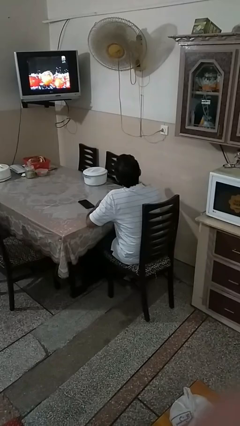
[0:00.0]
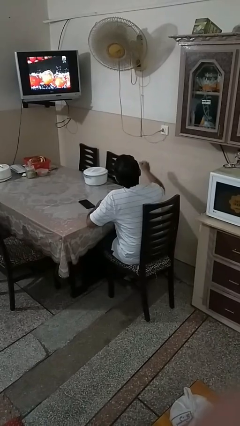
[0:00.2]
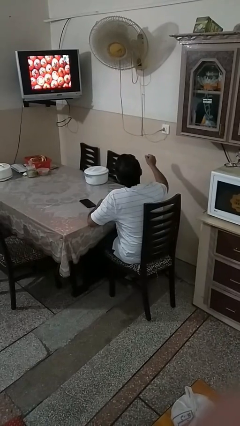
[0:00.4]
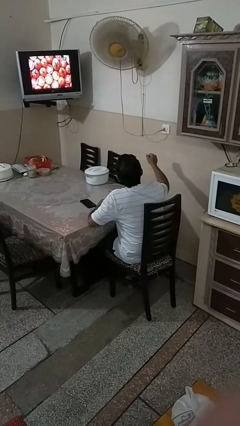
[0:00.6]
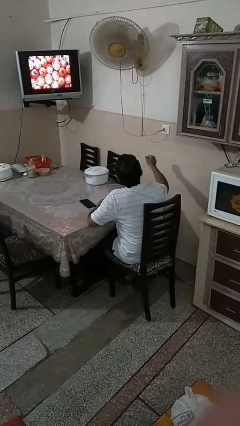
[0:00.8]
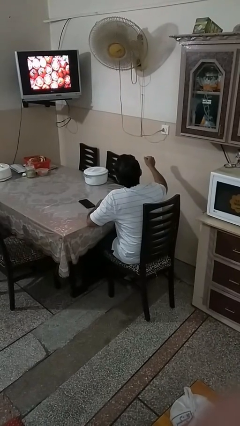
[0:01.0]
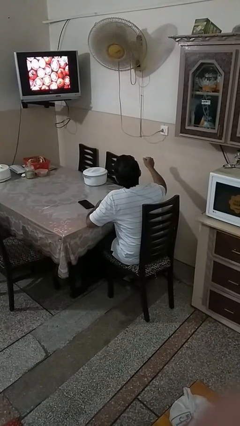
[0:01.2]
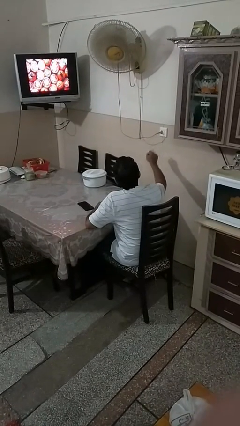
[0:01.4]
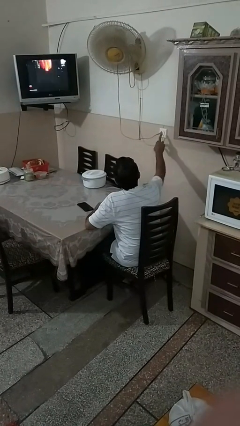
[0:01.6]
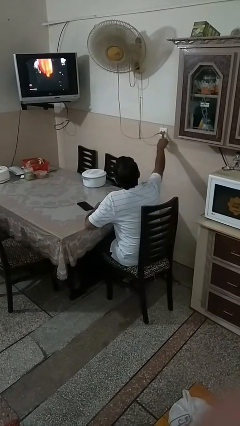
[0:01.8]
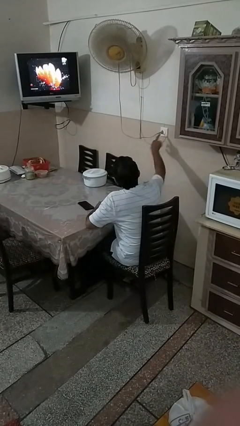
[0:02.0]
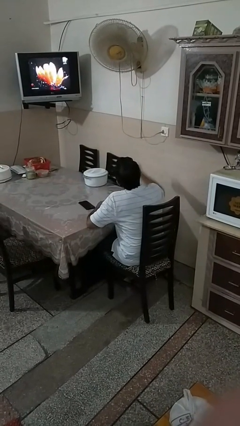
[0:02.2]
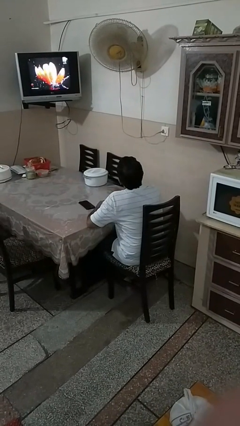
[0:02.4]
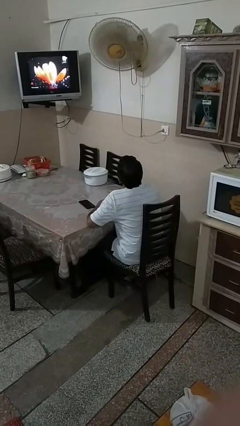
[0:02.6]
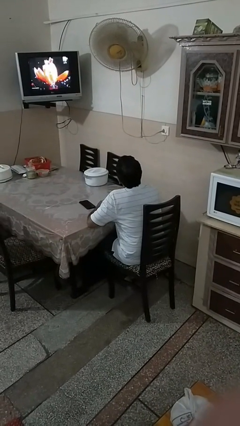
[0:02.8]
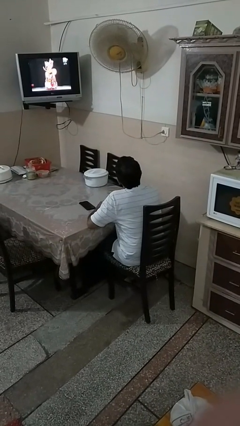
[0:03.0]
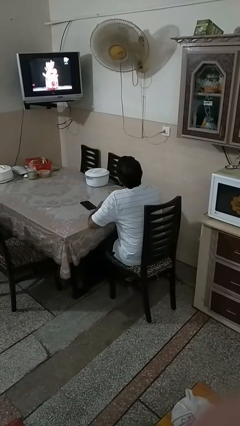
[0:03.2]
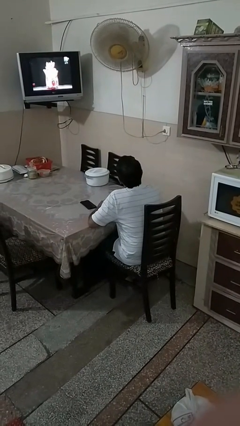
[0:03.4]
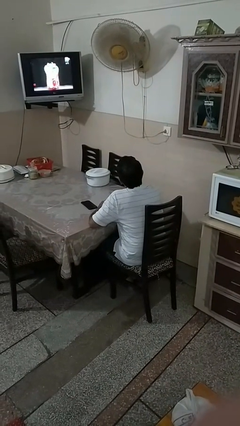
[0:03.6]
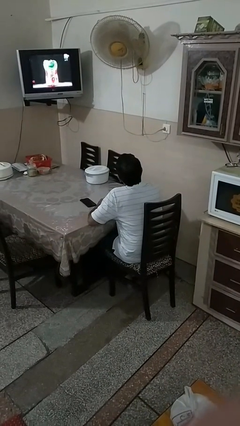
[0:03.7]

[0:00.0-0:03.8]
person turns off fan

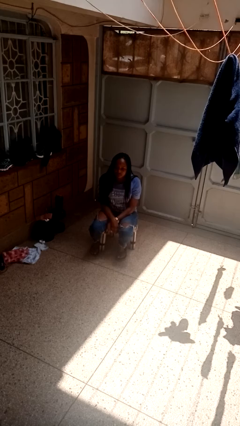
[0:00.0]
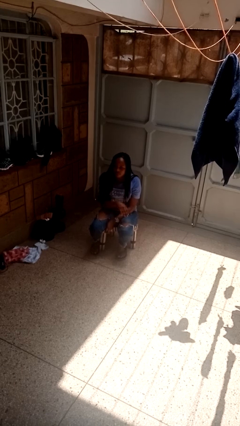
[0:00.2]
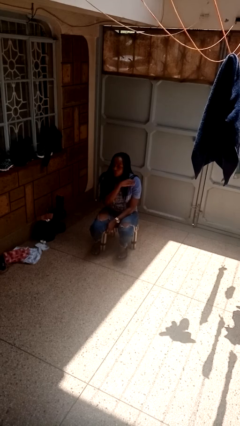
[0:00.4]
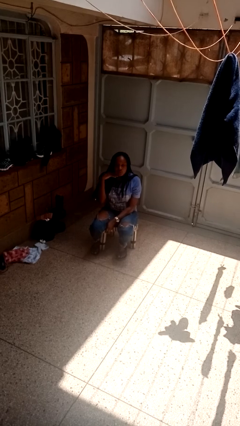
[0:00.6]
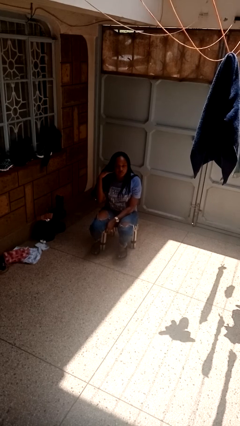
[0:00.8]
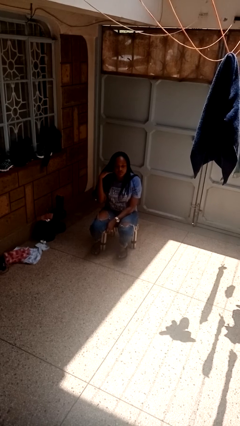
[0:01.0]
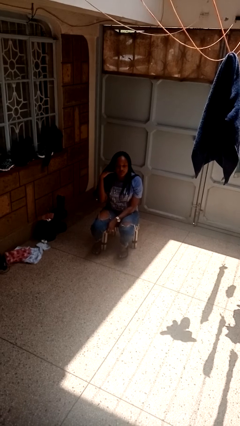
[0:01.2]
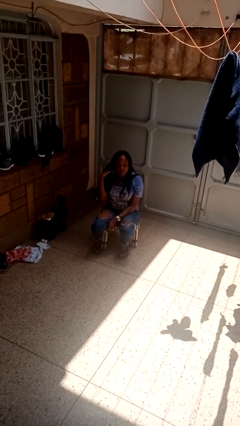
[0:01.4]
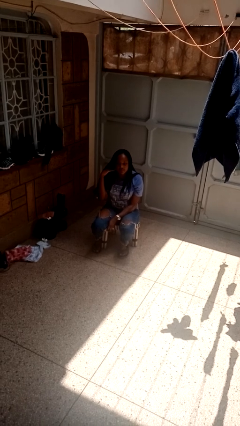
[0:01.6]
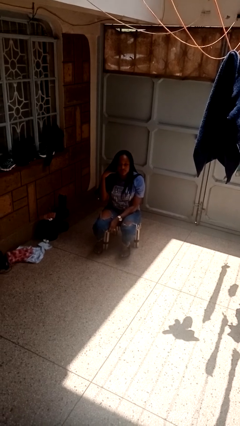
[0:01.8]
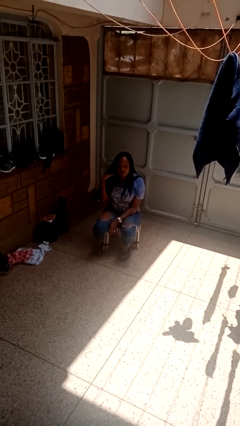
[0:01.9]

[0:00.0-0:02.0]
person gestures cut

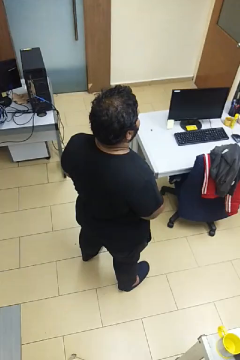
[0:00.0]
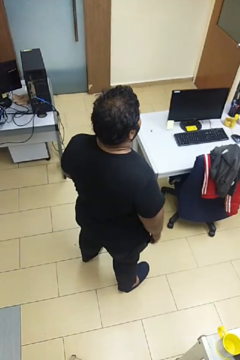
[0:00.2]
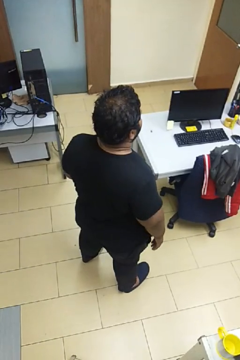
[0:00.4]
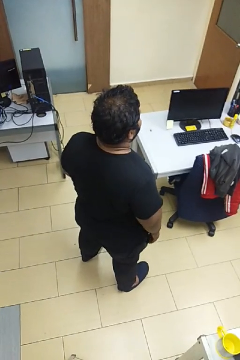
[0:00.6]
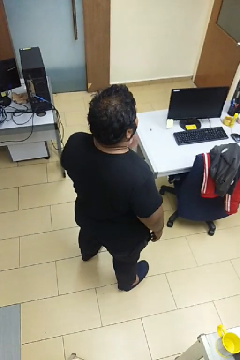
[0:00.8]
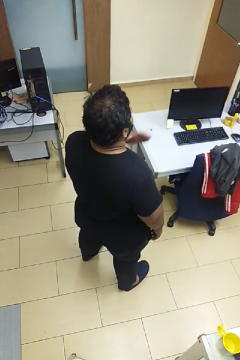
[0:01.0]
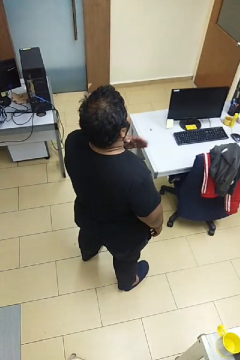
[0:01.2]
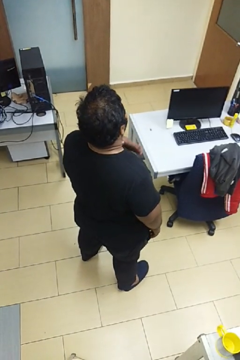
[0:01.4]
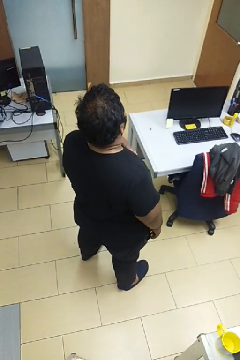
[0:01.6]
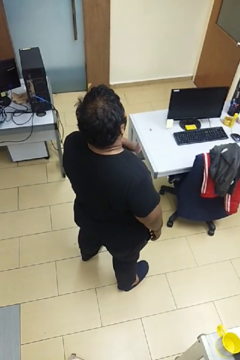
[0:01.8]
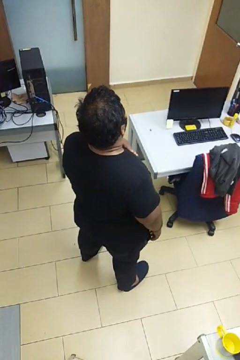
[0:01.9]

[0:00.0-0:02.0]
person drums on chest

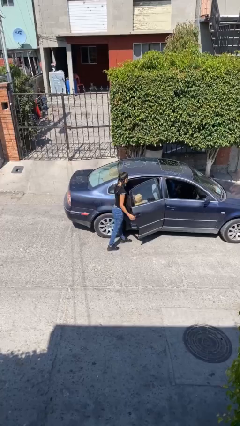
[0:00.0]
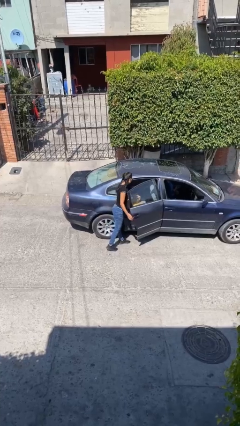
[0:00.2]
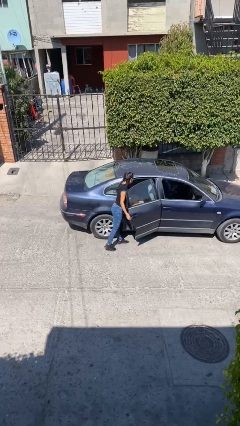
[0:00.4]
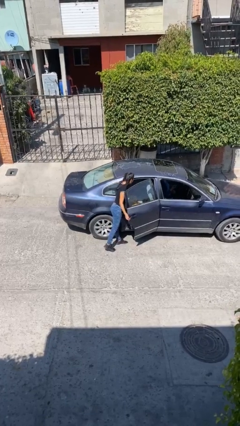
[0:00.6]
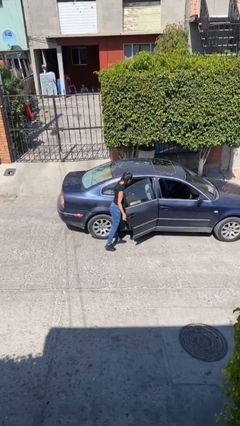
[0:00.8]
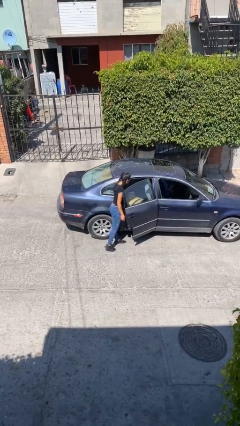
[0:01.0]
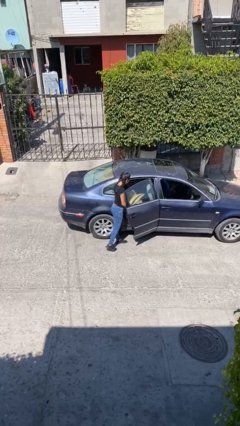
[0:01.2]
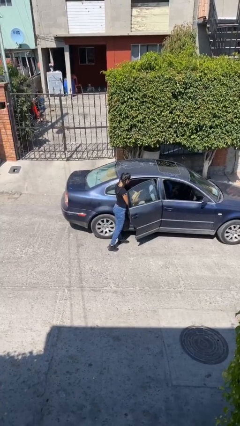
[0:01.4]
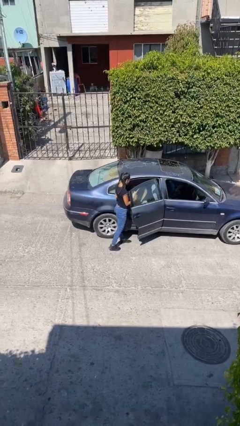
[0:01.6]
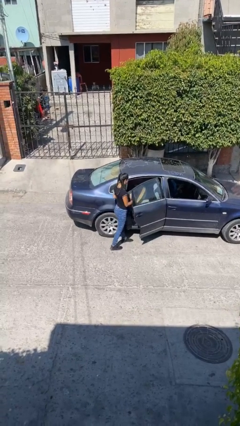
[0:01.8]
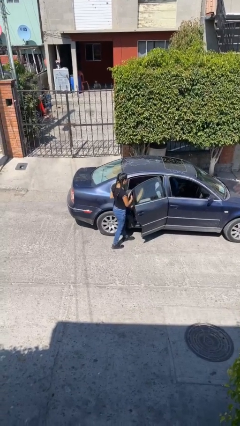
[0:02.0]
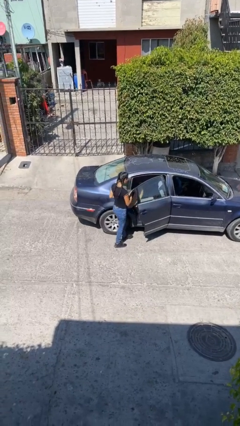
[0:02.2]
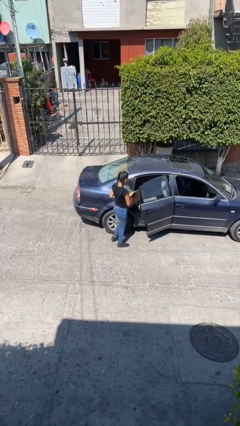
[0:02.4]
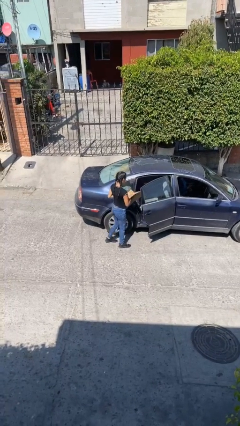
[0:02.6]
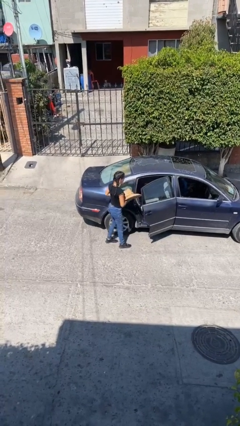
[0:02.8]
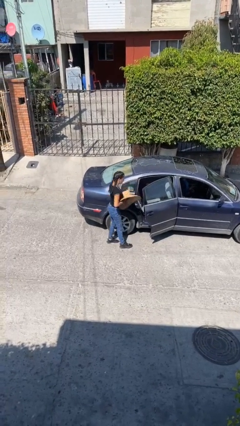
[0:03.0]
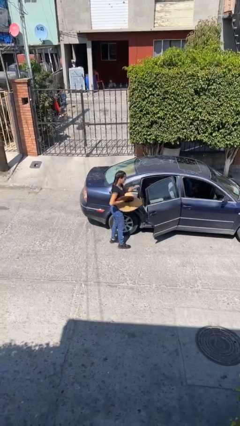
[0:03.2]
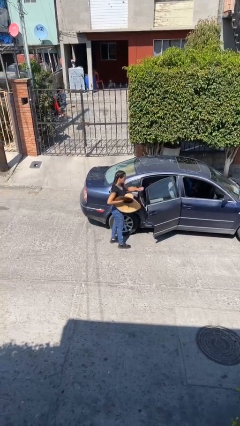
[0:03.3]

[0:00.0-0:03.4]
person unloads car

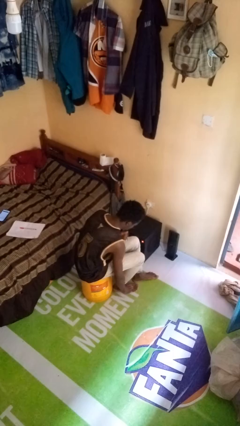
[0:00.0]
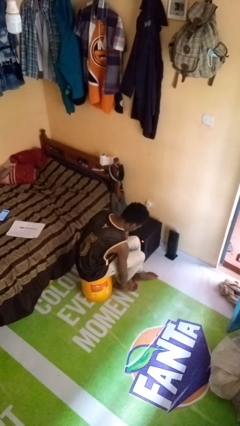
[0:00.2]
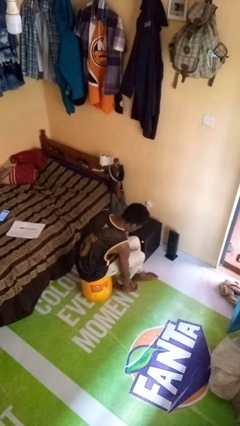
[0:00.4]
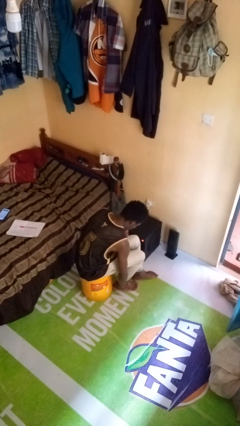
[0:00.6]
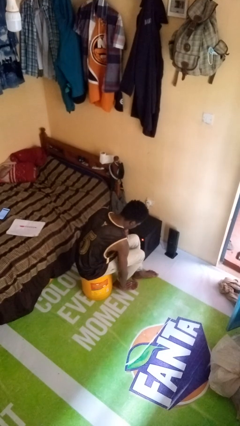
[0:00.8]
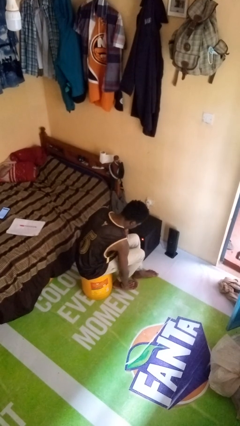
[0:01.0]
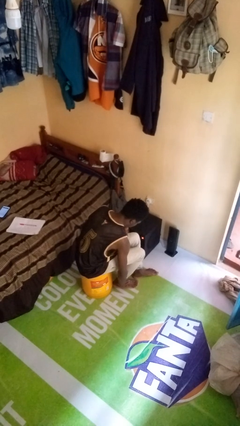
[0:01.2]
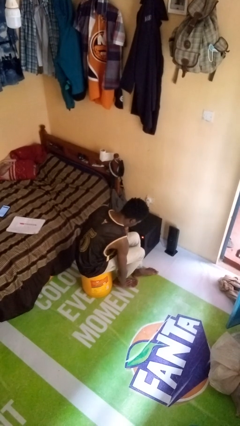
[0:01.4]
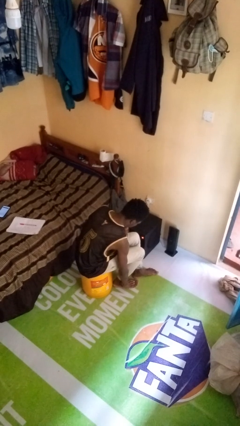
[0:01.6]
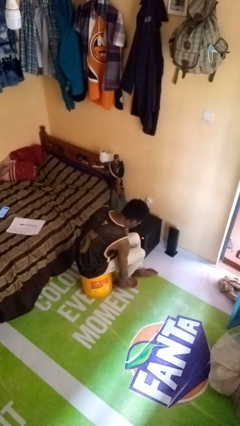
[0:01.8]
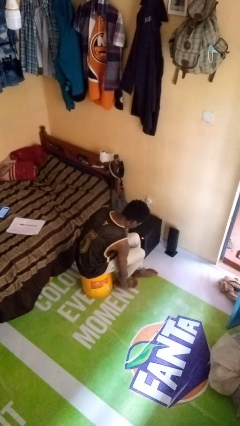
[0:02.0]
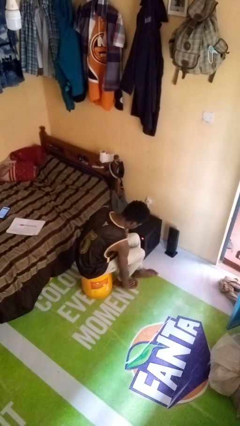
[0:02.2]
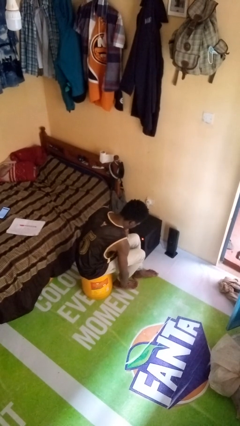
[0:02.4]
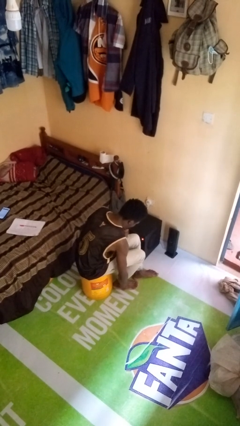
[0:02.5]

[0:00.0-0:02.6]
person rubs foot

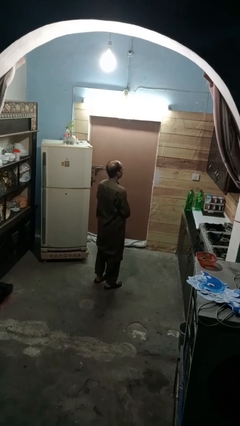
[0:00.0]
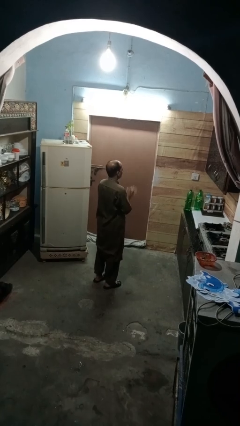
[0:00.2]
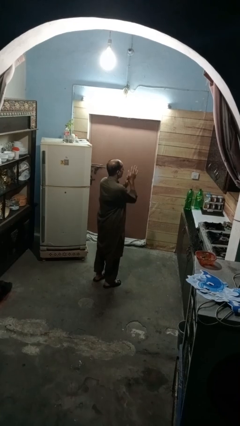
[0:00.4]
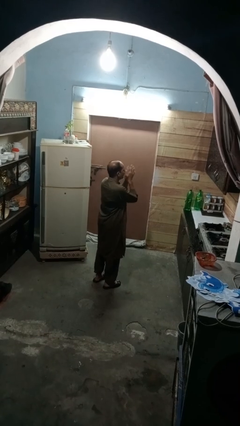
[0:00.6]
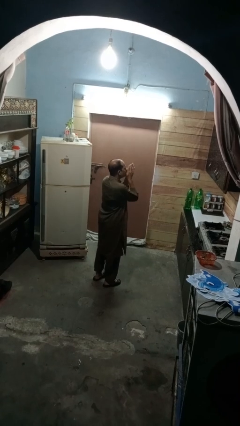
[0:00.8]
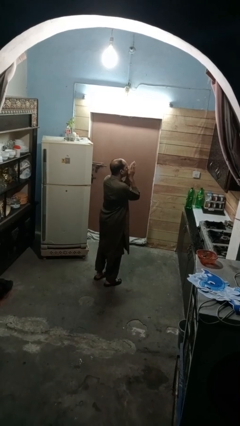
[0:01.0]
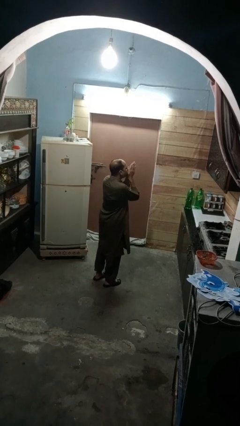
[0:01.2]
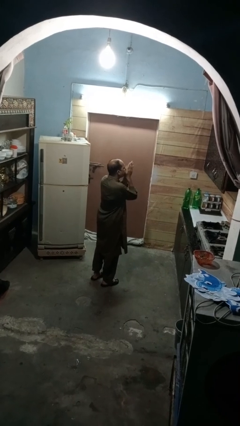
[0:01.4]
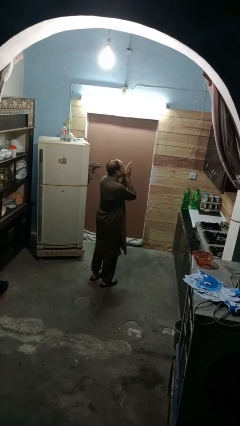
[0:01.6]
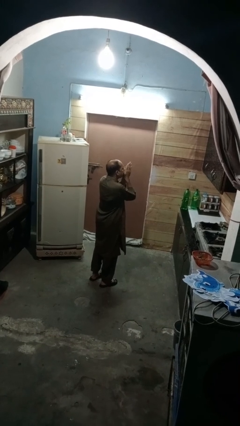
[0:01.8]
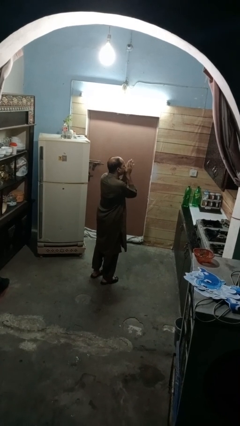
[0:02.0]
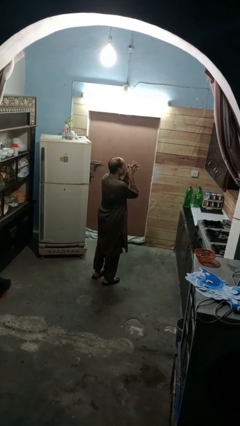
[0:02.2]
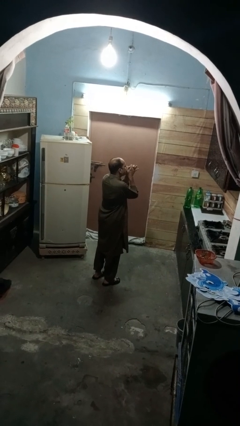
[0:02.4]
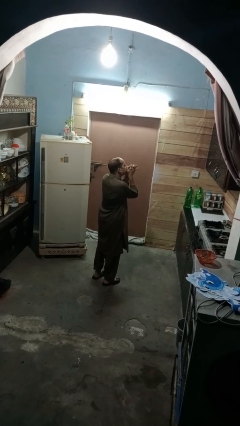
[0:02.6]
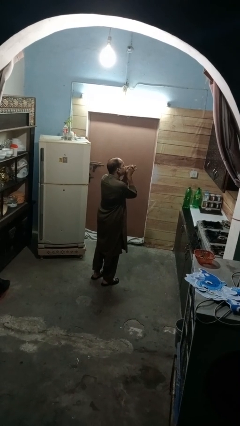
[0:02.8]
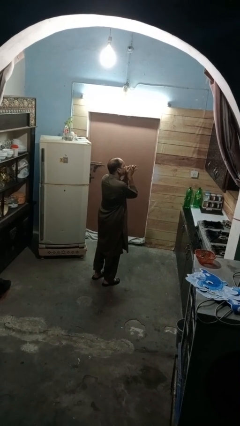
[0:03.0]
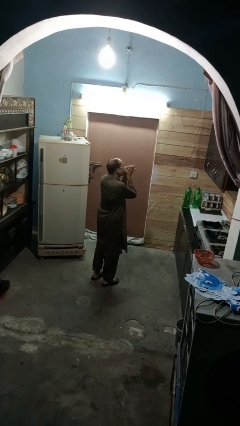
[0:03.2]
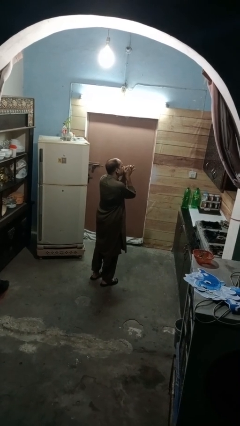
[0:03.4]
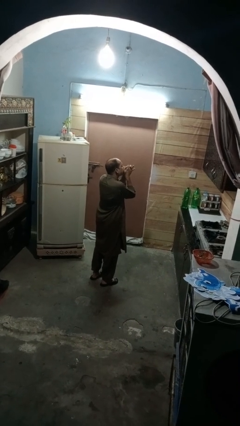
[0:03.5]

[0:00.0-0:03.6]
person blows into hands

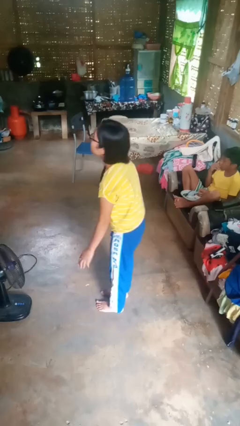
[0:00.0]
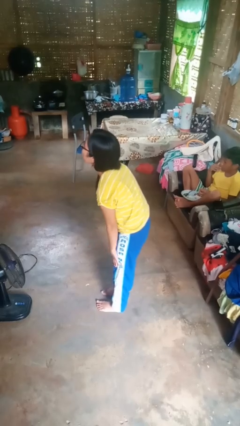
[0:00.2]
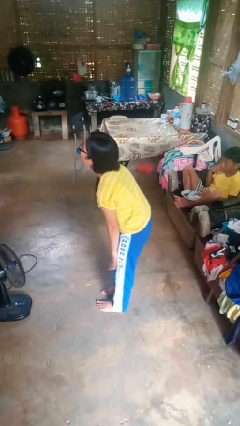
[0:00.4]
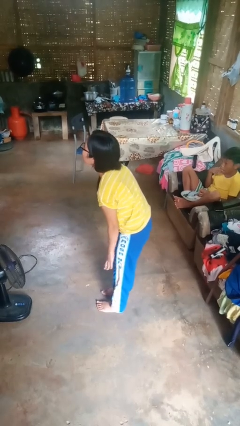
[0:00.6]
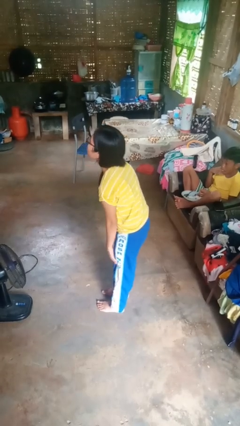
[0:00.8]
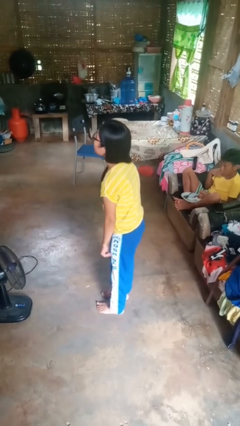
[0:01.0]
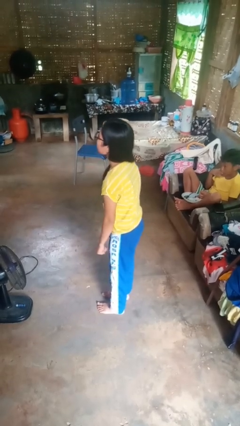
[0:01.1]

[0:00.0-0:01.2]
person slaps hands on thighs
